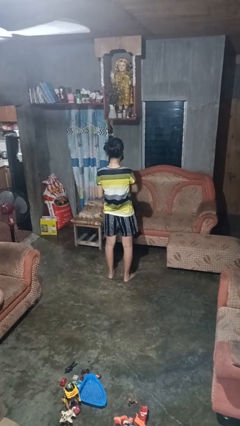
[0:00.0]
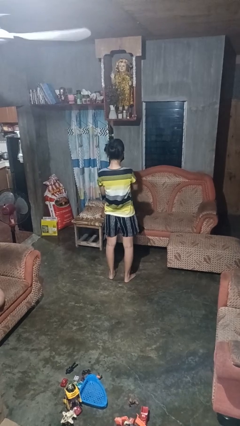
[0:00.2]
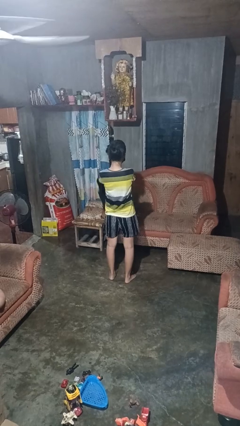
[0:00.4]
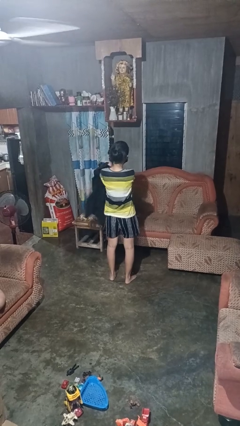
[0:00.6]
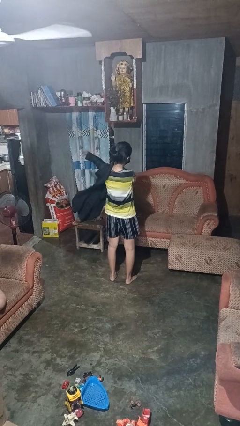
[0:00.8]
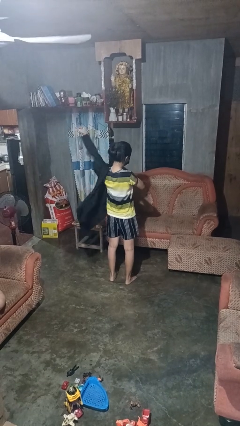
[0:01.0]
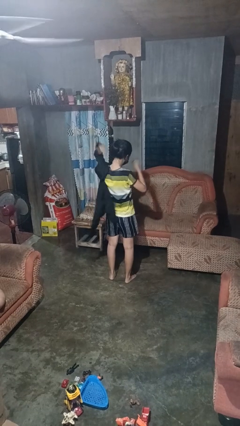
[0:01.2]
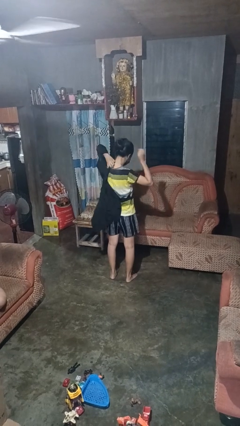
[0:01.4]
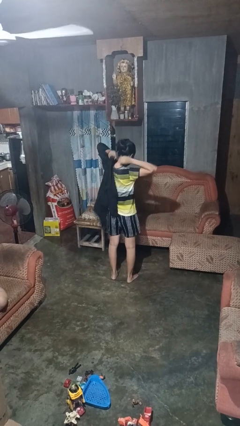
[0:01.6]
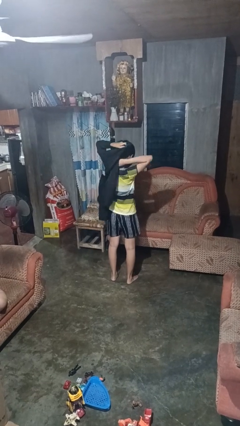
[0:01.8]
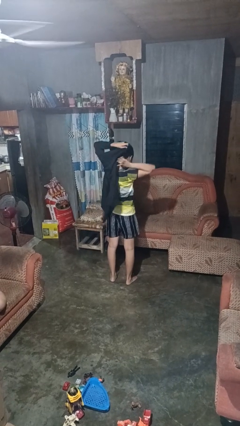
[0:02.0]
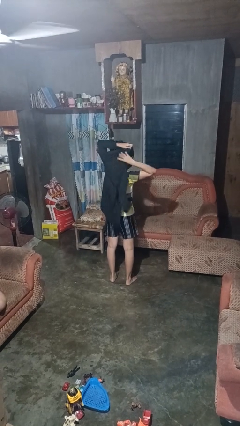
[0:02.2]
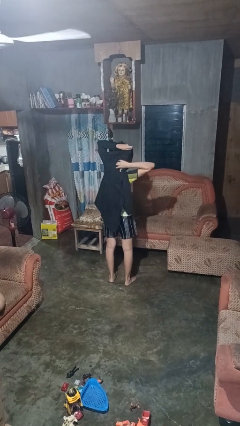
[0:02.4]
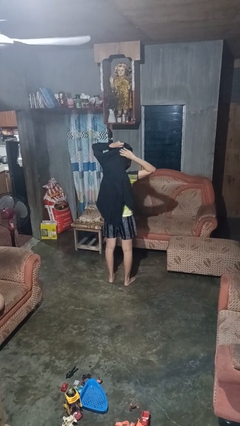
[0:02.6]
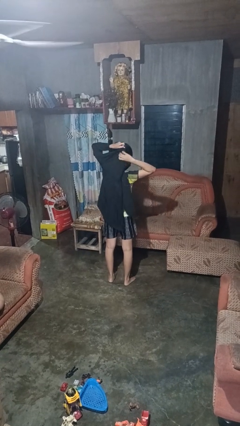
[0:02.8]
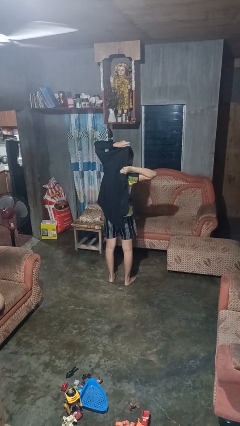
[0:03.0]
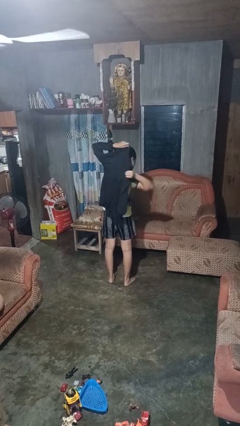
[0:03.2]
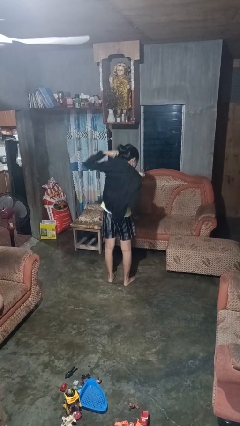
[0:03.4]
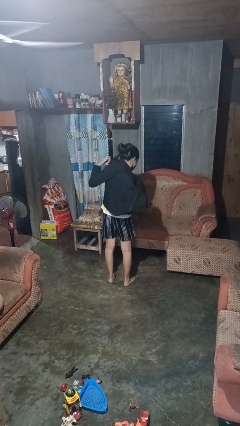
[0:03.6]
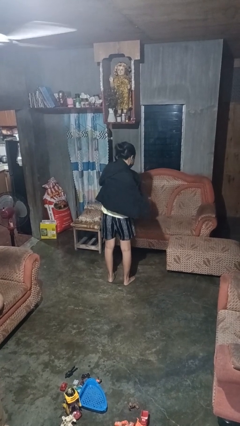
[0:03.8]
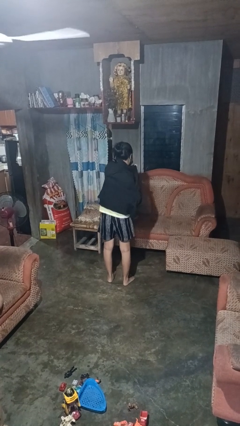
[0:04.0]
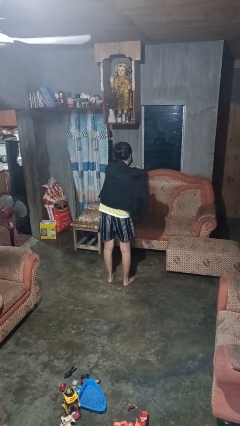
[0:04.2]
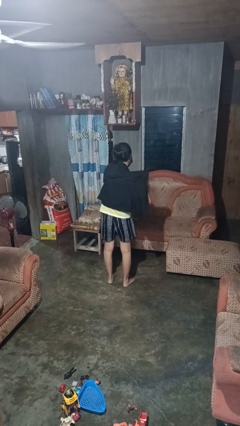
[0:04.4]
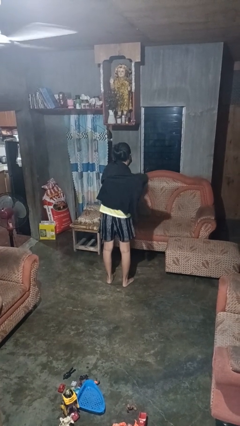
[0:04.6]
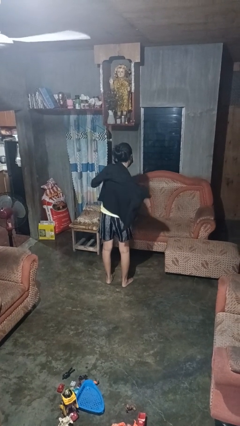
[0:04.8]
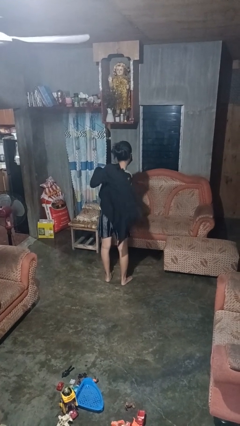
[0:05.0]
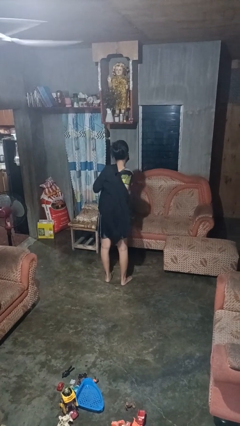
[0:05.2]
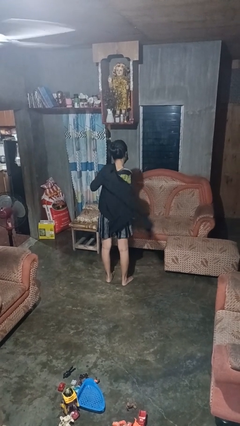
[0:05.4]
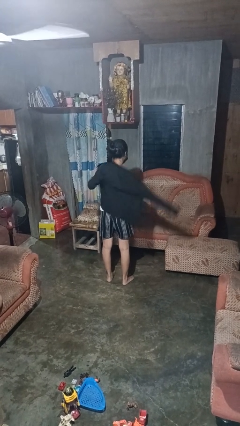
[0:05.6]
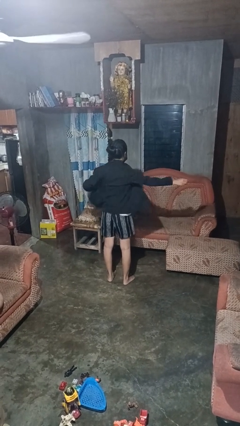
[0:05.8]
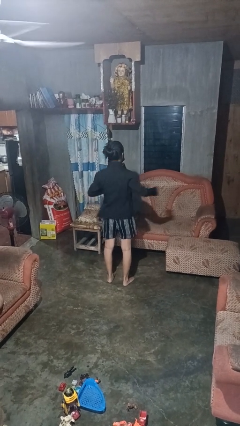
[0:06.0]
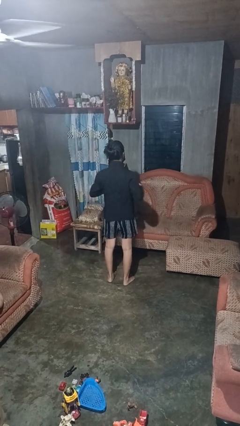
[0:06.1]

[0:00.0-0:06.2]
person puts on shirt

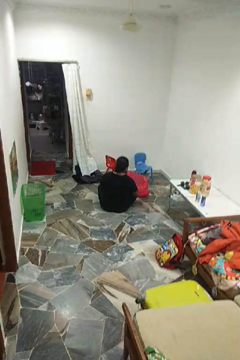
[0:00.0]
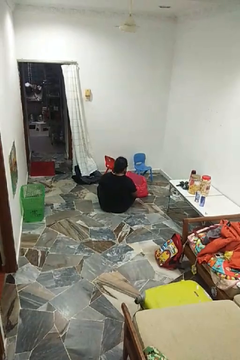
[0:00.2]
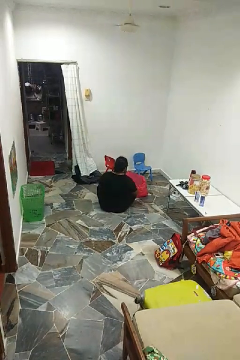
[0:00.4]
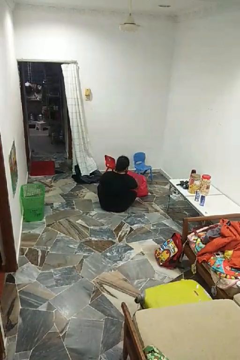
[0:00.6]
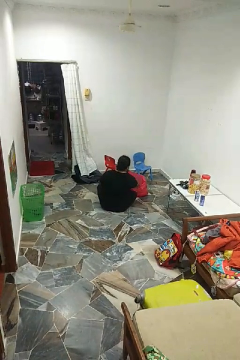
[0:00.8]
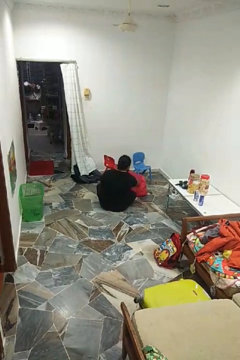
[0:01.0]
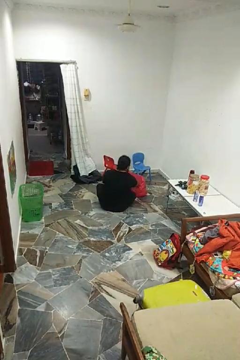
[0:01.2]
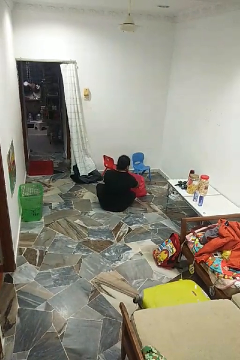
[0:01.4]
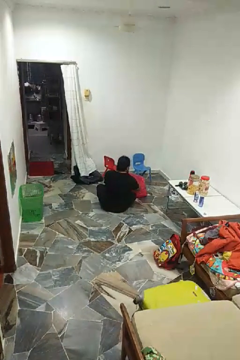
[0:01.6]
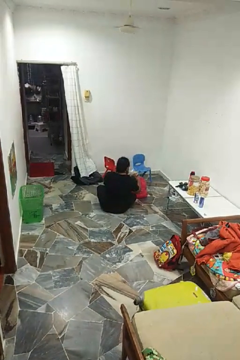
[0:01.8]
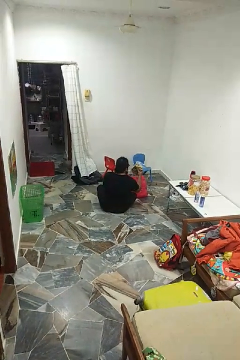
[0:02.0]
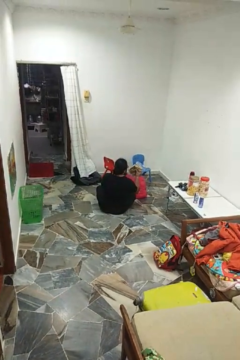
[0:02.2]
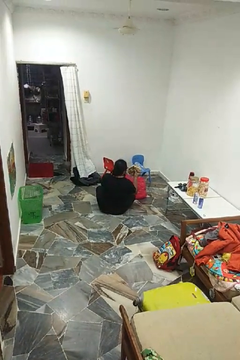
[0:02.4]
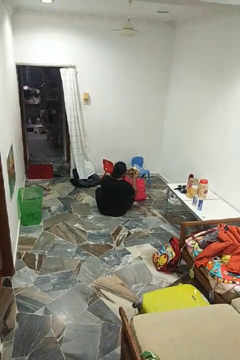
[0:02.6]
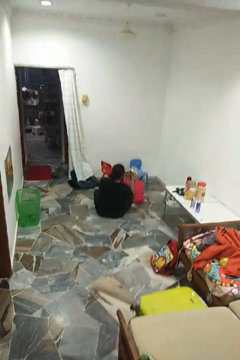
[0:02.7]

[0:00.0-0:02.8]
person takes object from bag

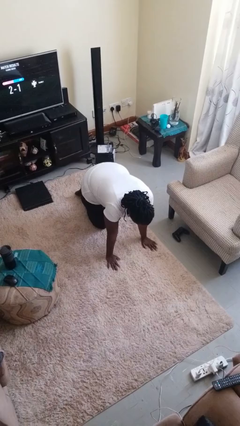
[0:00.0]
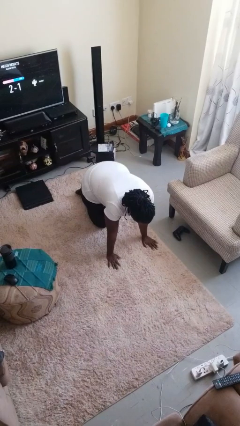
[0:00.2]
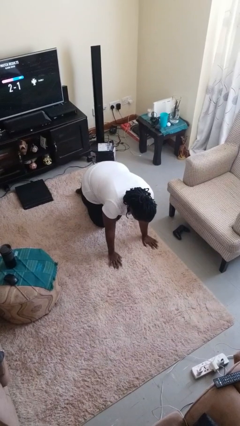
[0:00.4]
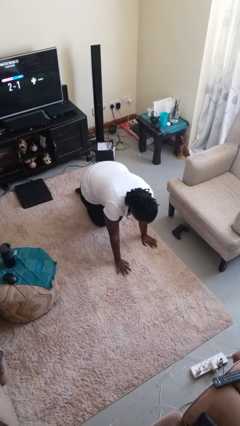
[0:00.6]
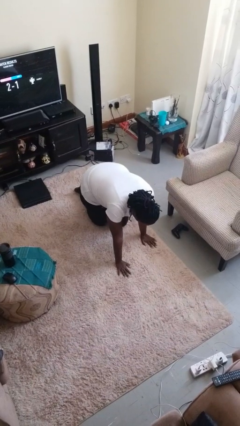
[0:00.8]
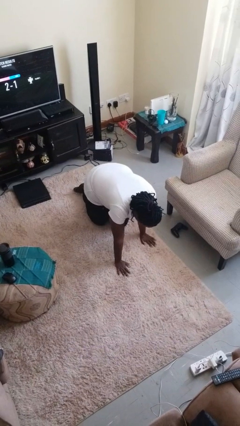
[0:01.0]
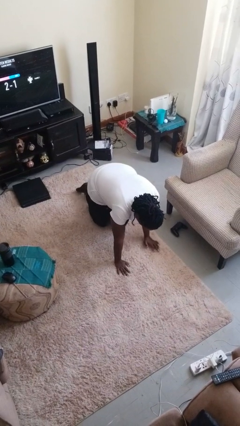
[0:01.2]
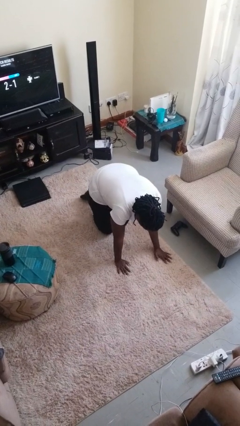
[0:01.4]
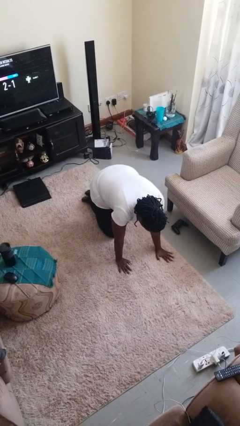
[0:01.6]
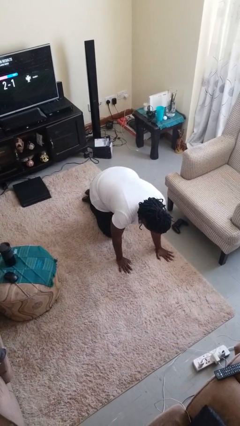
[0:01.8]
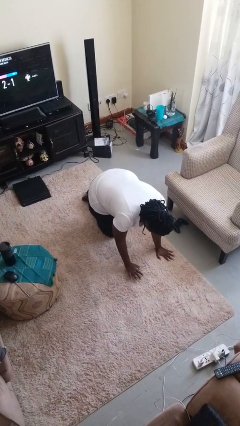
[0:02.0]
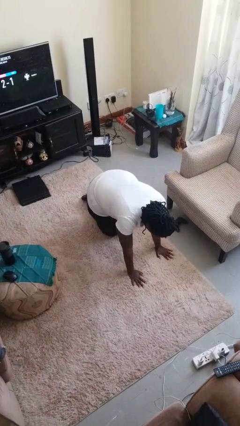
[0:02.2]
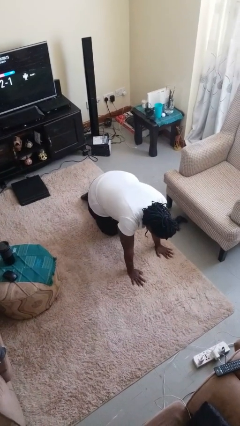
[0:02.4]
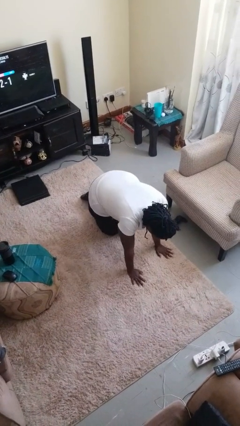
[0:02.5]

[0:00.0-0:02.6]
person crawls

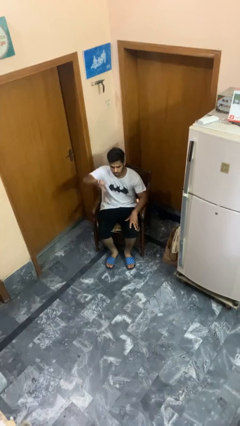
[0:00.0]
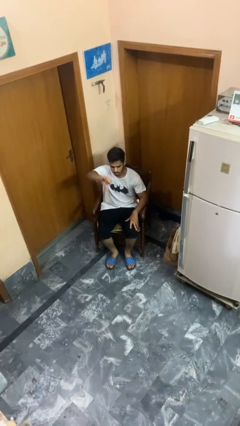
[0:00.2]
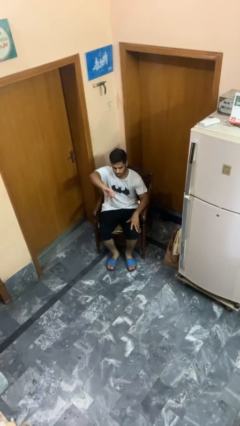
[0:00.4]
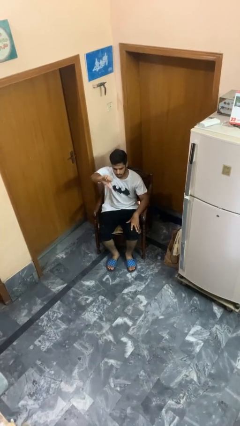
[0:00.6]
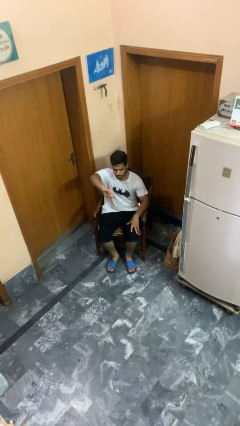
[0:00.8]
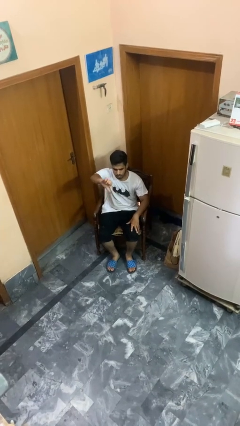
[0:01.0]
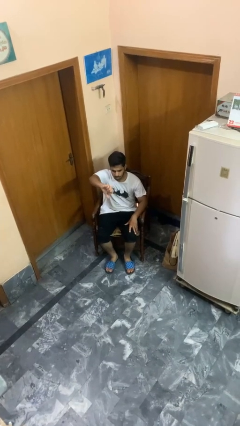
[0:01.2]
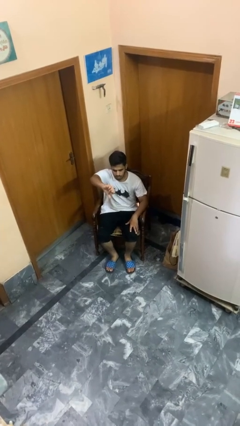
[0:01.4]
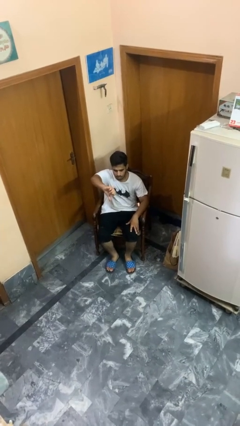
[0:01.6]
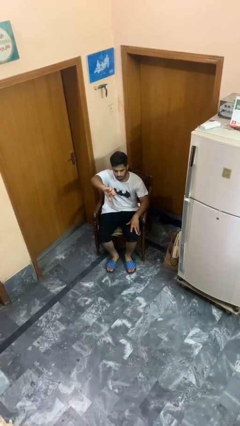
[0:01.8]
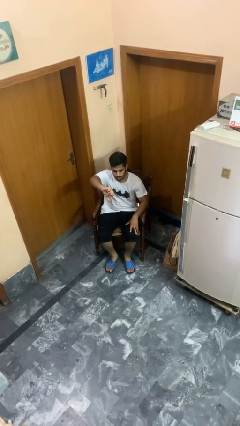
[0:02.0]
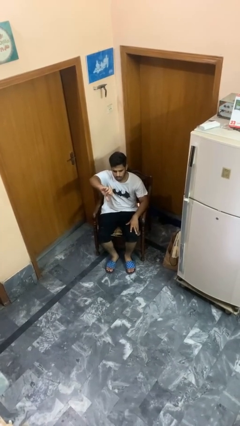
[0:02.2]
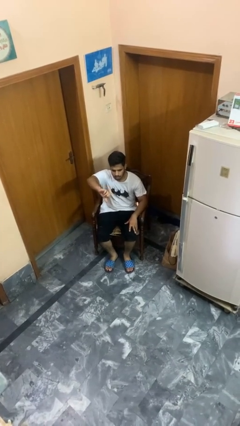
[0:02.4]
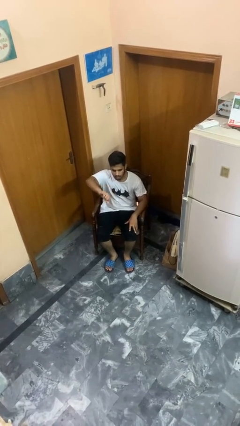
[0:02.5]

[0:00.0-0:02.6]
person gestures thumbs down

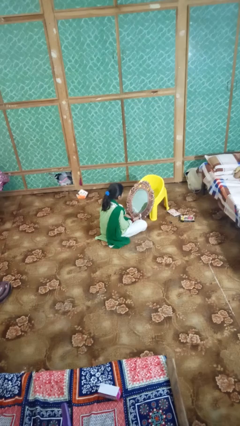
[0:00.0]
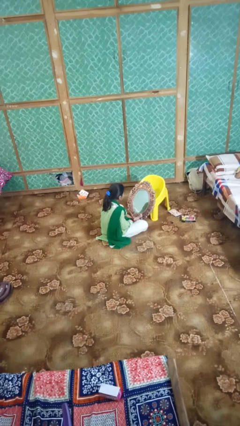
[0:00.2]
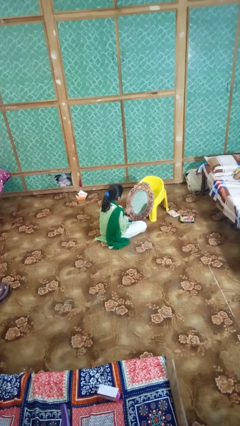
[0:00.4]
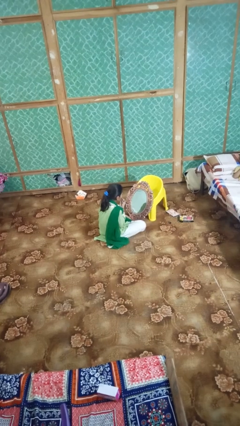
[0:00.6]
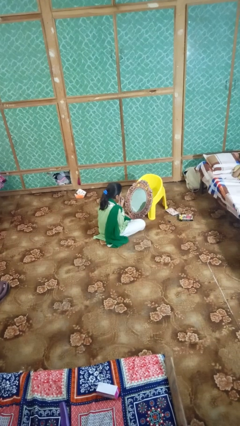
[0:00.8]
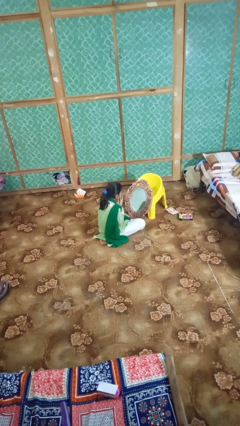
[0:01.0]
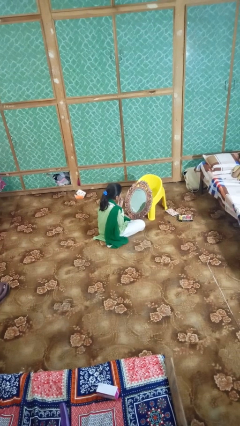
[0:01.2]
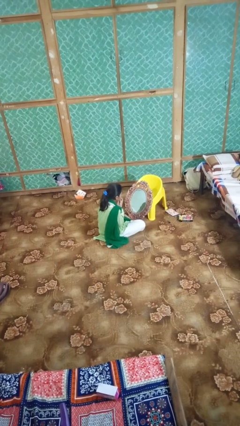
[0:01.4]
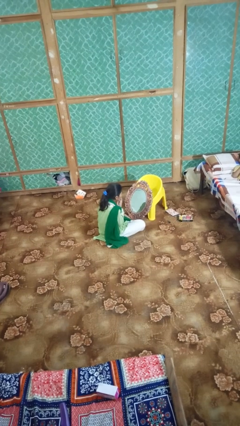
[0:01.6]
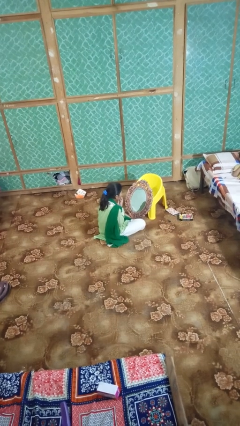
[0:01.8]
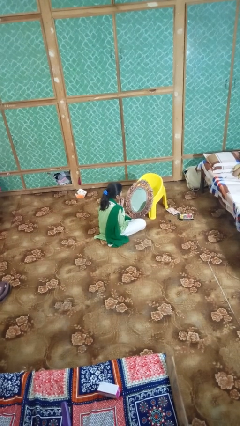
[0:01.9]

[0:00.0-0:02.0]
person applies lip makeup

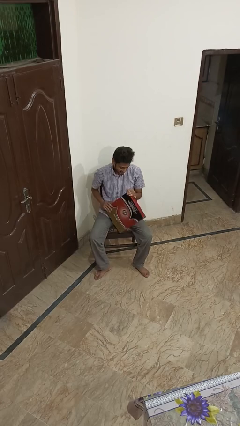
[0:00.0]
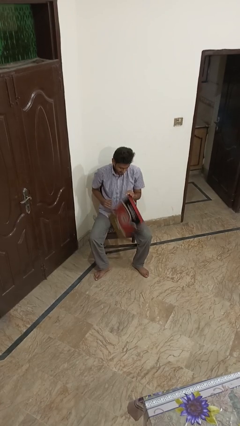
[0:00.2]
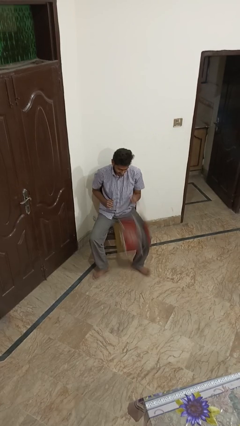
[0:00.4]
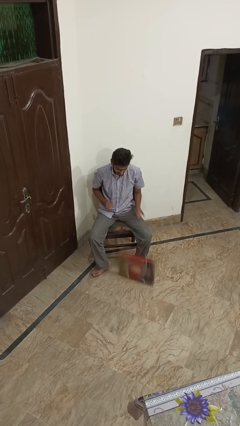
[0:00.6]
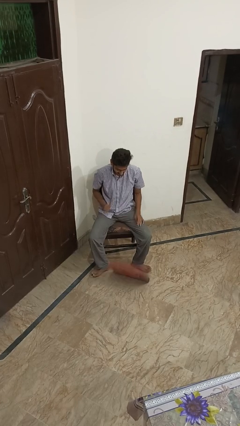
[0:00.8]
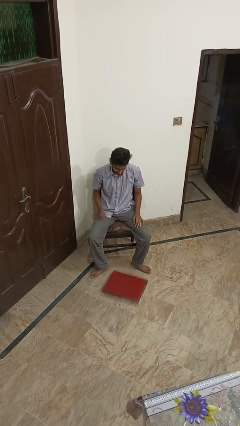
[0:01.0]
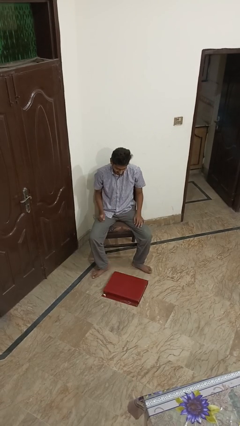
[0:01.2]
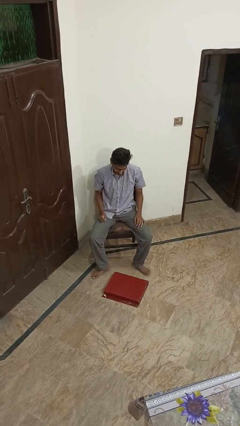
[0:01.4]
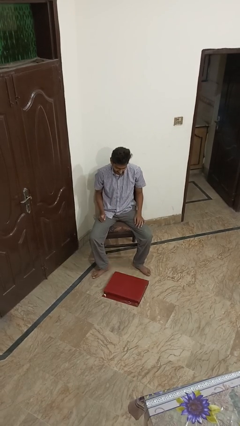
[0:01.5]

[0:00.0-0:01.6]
person drops object
